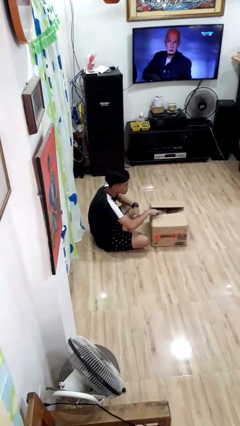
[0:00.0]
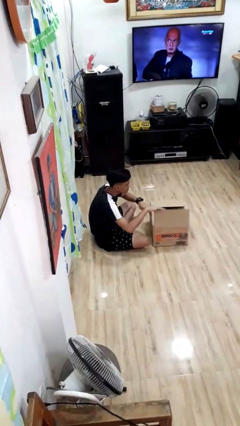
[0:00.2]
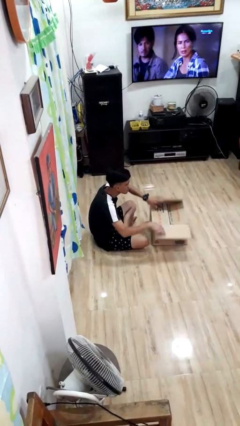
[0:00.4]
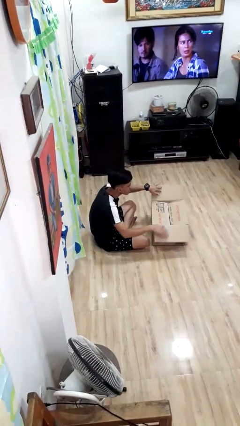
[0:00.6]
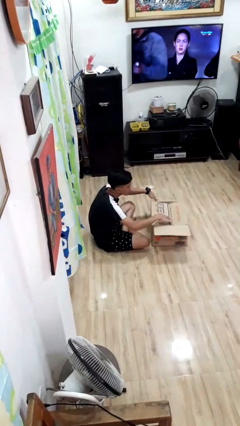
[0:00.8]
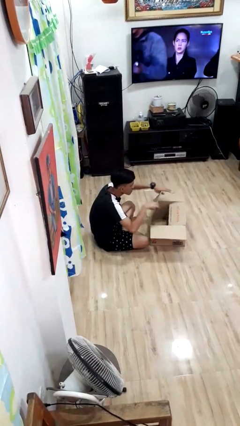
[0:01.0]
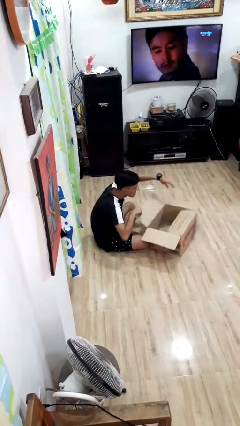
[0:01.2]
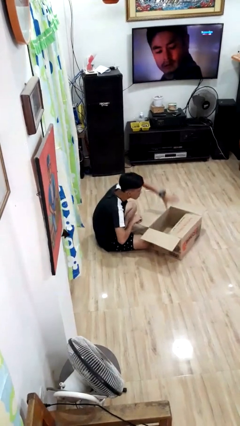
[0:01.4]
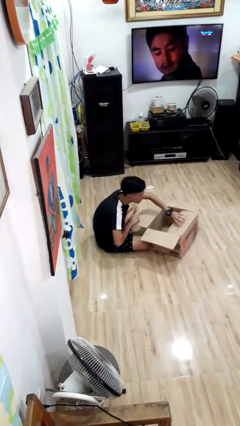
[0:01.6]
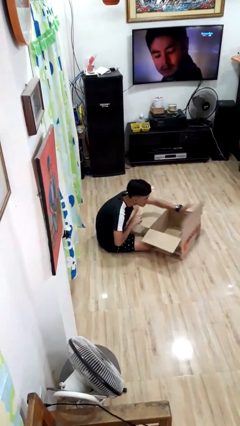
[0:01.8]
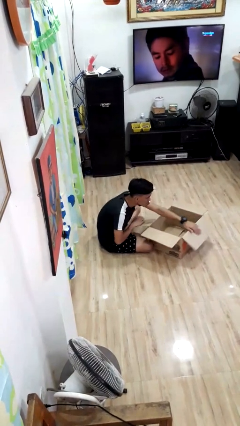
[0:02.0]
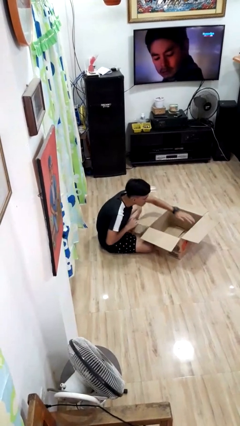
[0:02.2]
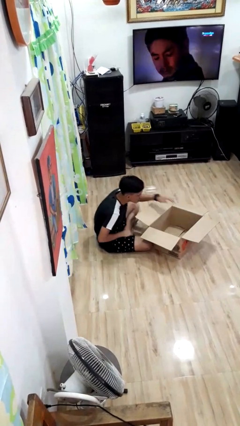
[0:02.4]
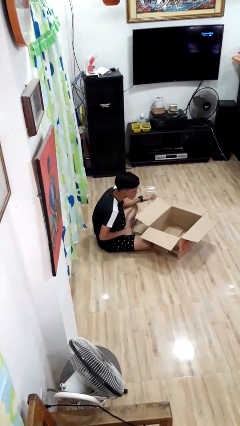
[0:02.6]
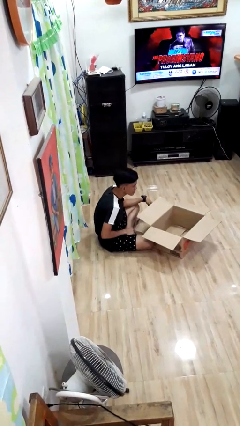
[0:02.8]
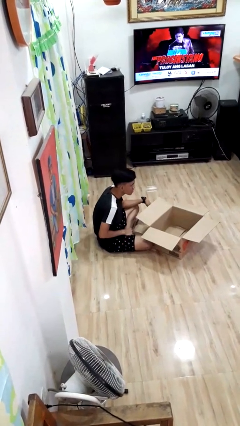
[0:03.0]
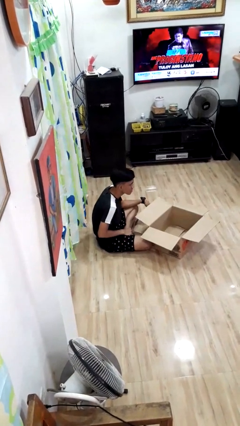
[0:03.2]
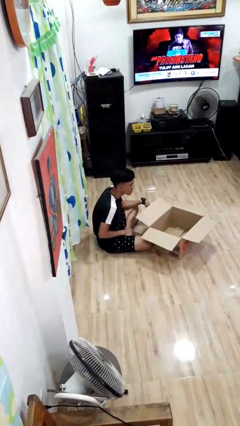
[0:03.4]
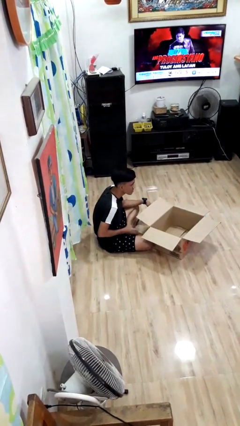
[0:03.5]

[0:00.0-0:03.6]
person opens box

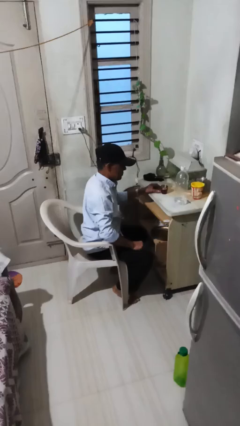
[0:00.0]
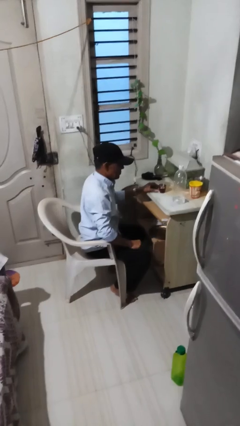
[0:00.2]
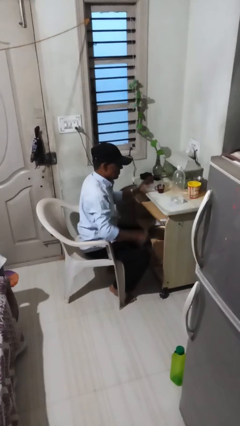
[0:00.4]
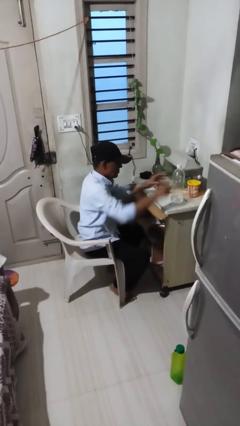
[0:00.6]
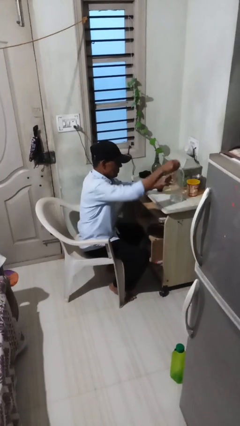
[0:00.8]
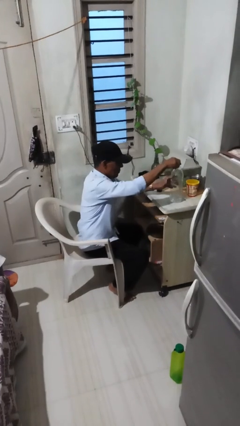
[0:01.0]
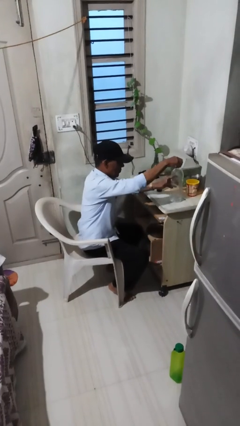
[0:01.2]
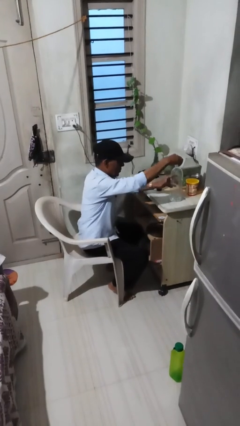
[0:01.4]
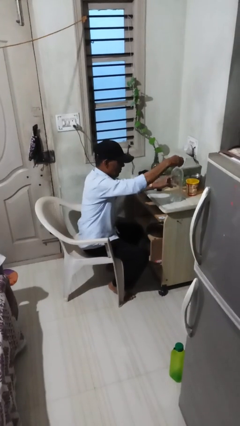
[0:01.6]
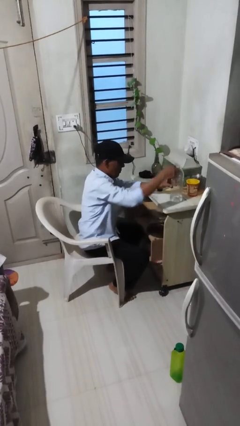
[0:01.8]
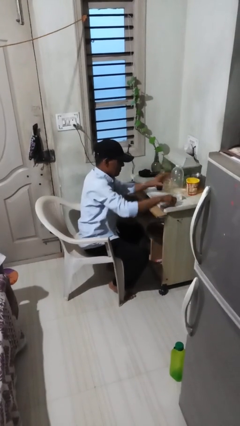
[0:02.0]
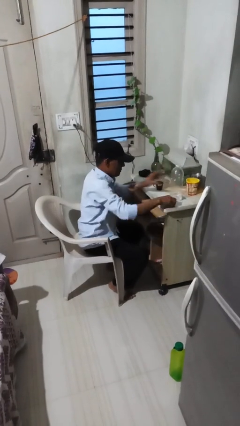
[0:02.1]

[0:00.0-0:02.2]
person unscrews lid from bottle

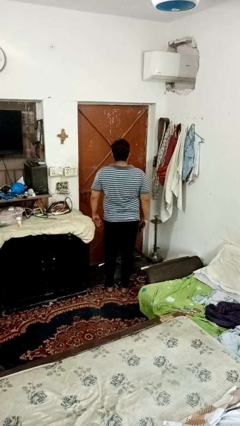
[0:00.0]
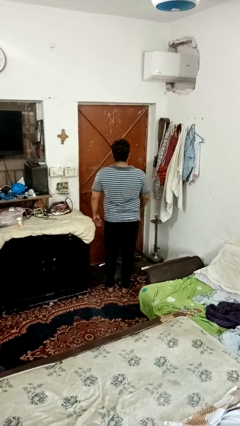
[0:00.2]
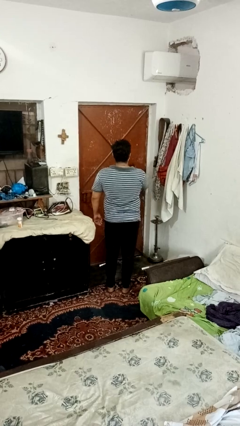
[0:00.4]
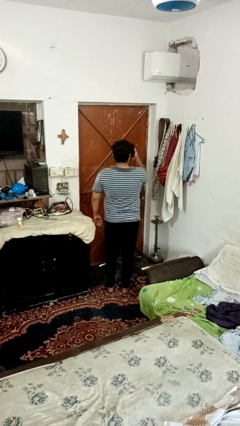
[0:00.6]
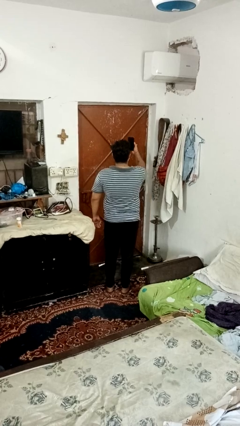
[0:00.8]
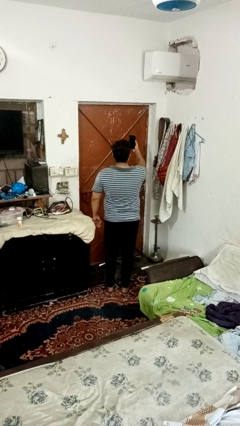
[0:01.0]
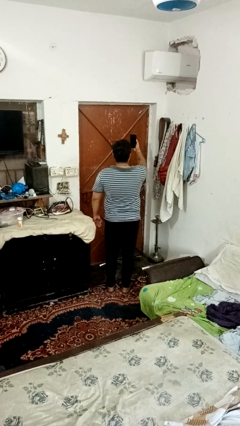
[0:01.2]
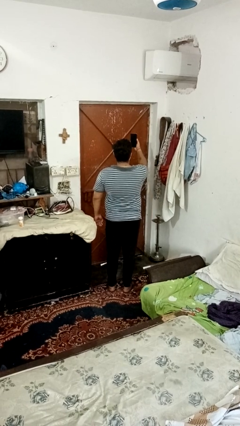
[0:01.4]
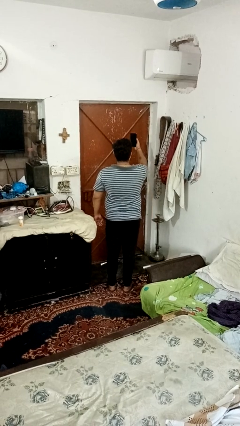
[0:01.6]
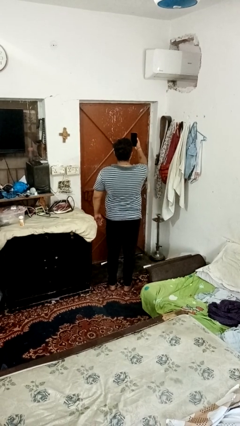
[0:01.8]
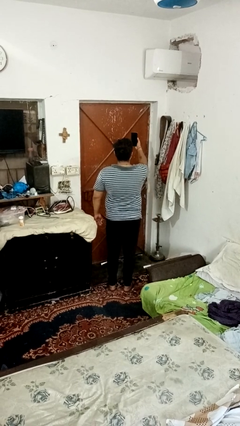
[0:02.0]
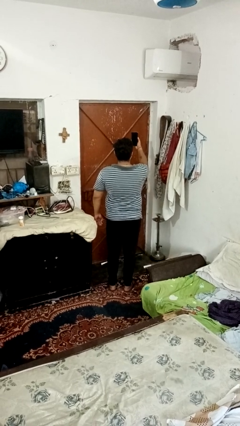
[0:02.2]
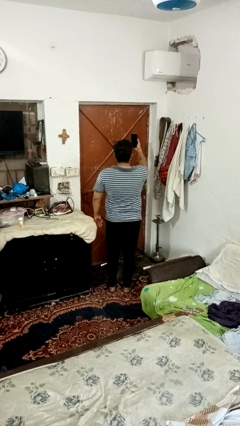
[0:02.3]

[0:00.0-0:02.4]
person takes selfie

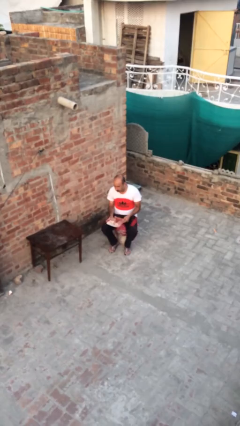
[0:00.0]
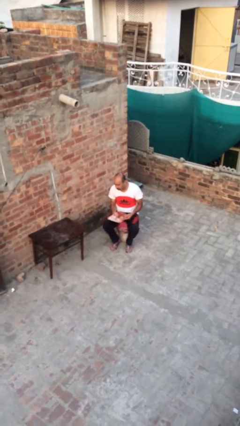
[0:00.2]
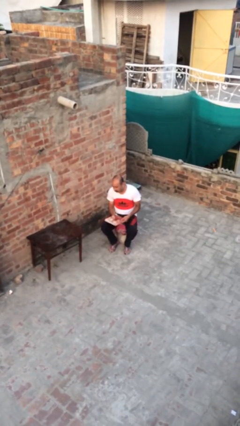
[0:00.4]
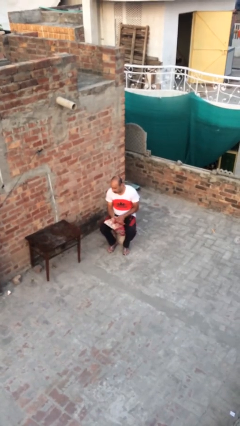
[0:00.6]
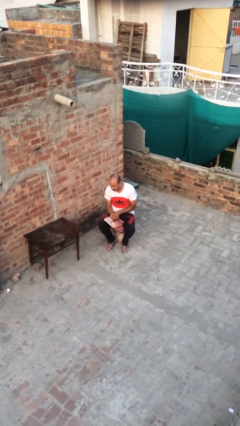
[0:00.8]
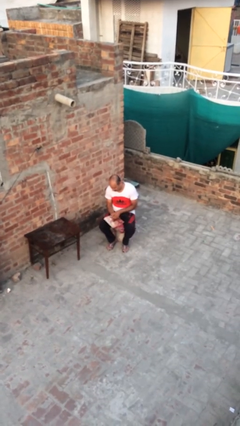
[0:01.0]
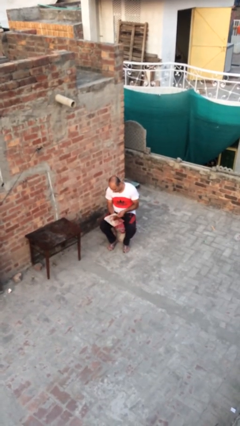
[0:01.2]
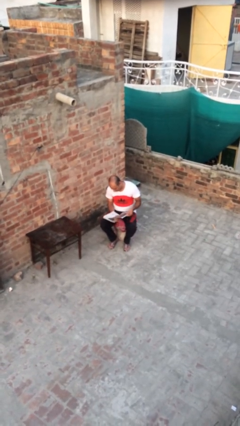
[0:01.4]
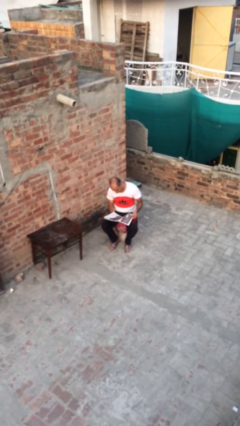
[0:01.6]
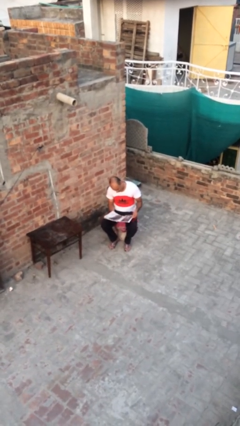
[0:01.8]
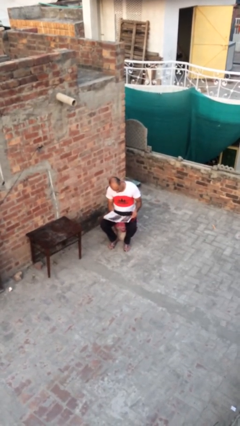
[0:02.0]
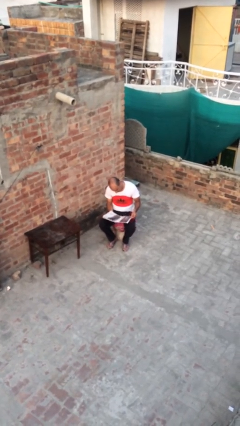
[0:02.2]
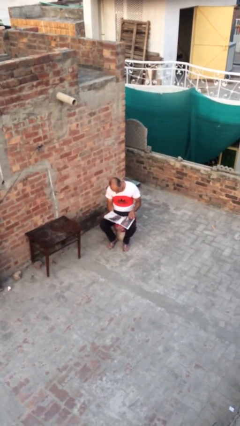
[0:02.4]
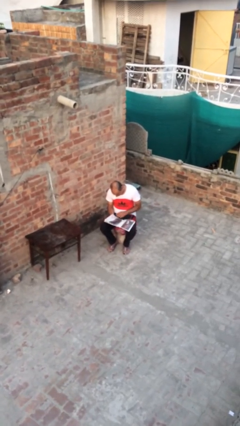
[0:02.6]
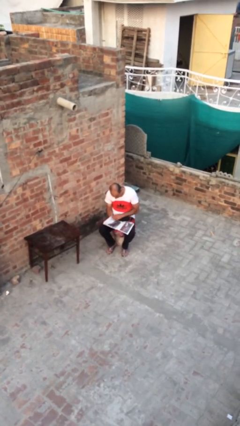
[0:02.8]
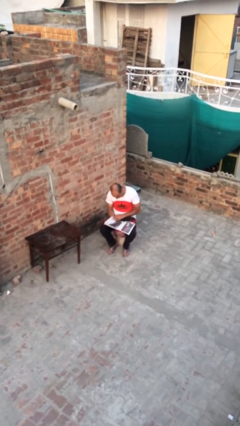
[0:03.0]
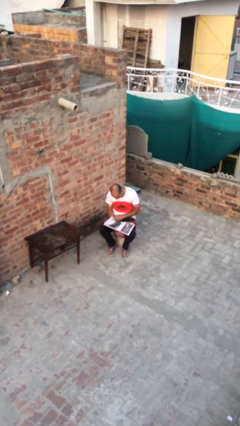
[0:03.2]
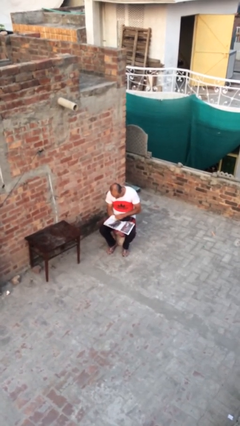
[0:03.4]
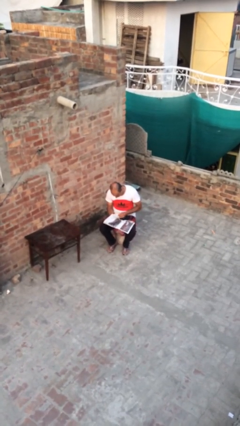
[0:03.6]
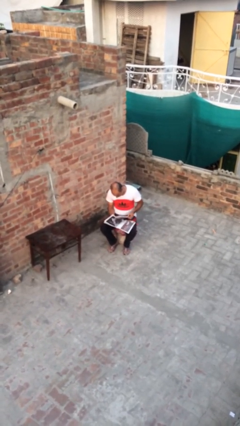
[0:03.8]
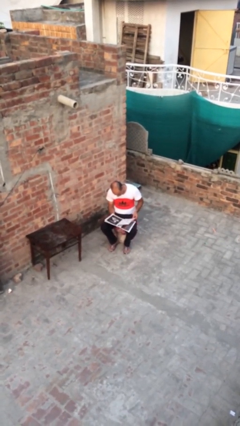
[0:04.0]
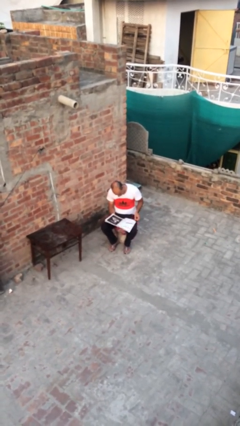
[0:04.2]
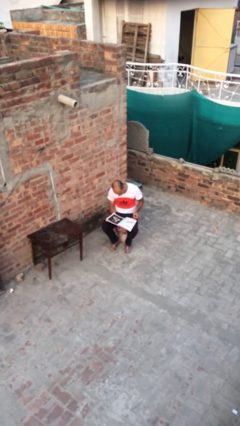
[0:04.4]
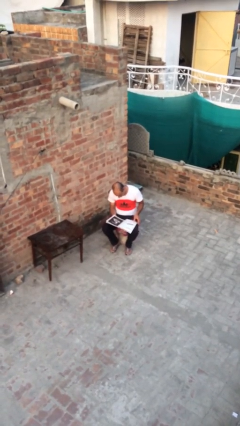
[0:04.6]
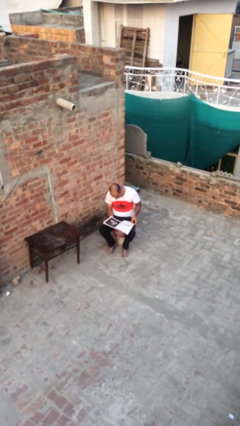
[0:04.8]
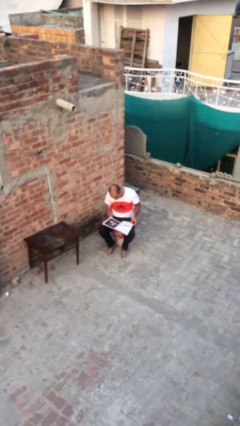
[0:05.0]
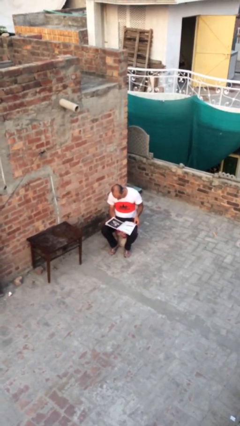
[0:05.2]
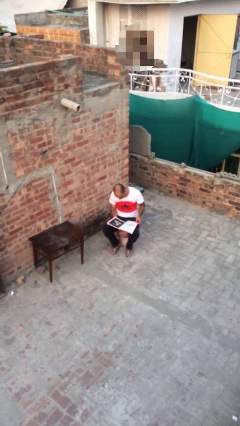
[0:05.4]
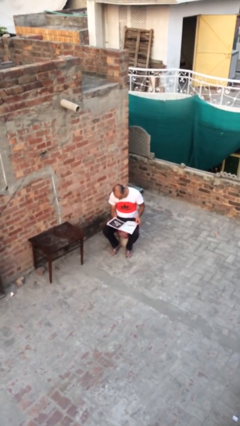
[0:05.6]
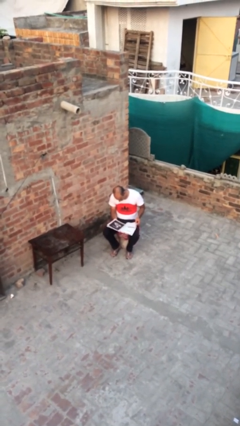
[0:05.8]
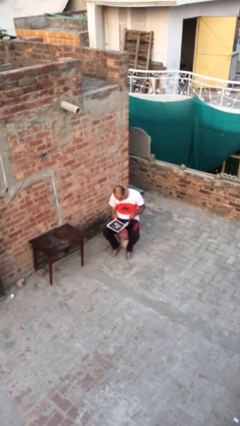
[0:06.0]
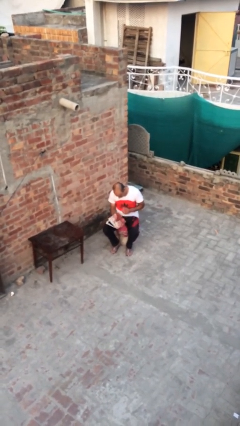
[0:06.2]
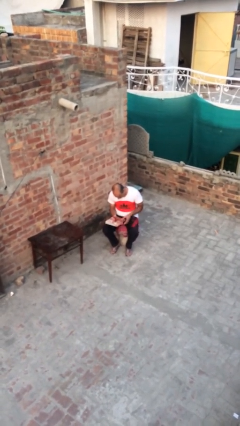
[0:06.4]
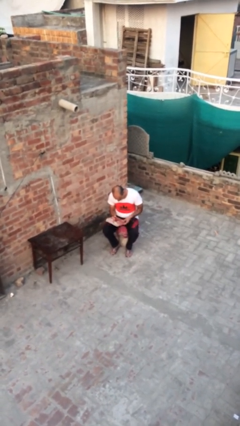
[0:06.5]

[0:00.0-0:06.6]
person reads document

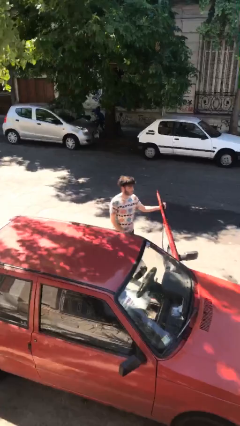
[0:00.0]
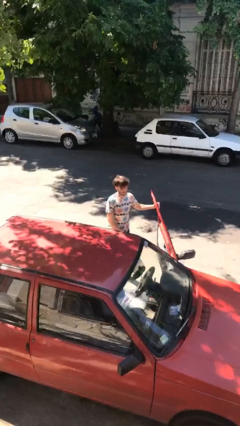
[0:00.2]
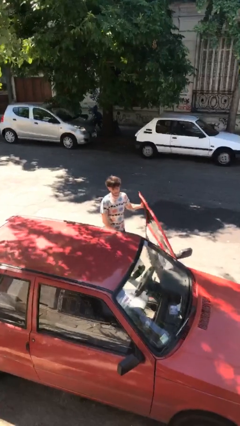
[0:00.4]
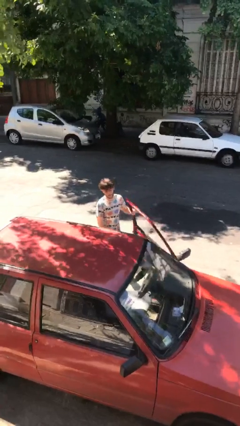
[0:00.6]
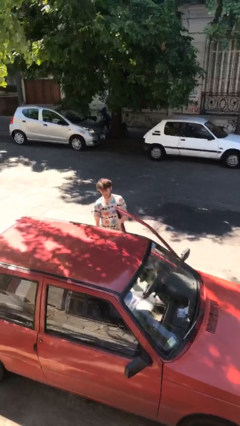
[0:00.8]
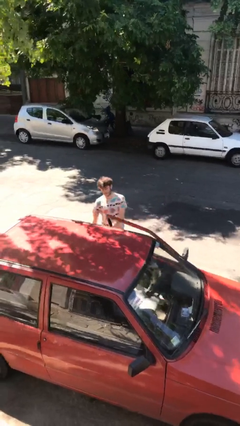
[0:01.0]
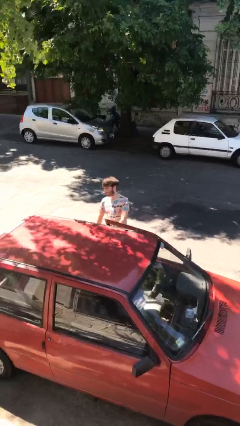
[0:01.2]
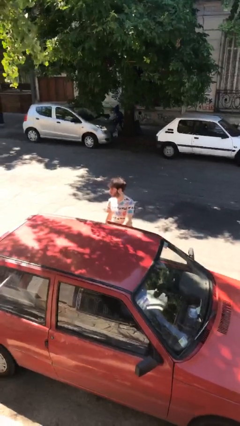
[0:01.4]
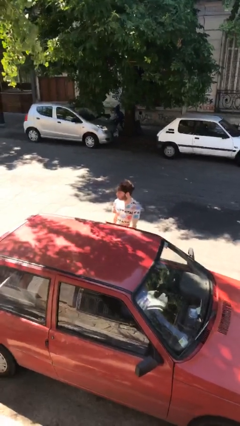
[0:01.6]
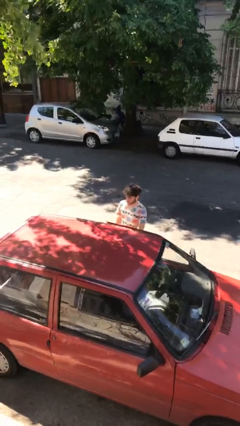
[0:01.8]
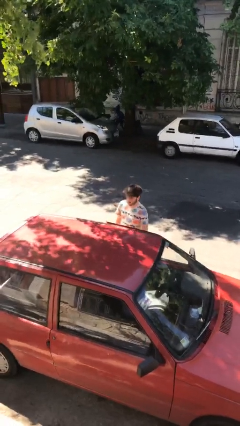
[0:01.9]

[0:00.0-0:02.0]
person closes car door

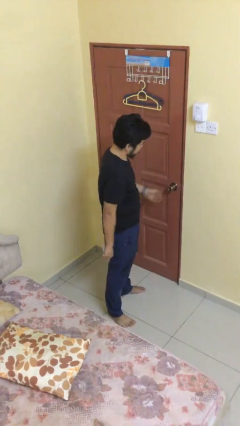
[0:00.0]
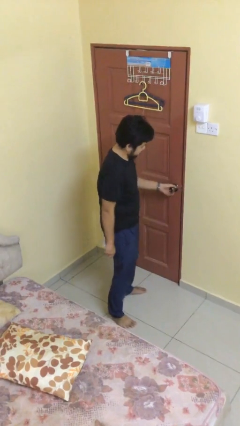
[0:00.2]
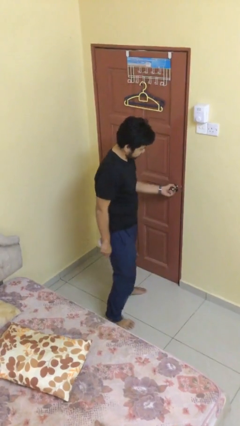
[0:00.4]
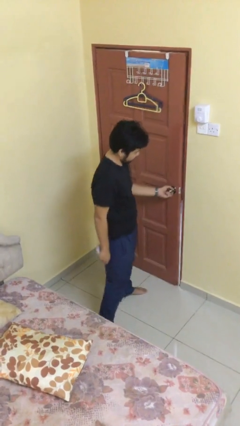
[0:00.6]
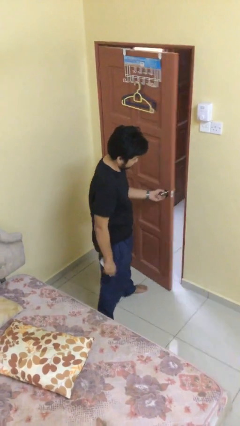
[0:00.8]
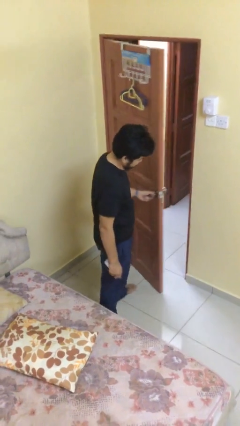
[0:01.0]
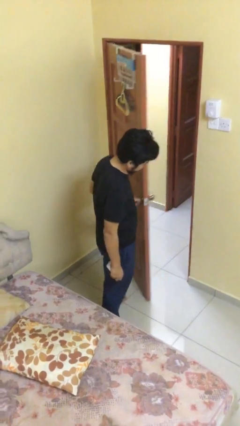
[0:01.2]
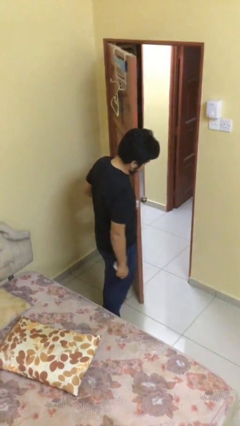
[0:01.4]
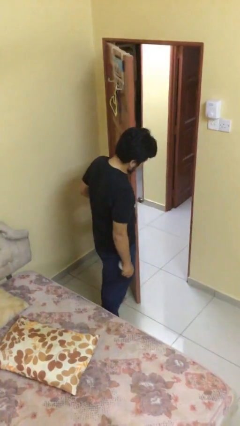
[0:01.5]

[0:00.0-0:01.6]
person opens facility door
